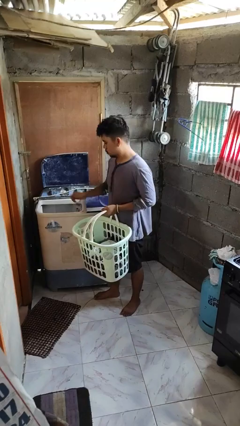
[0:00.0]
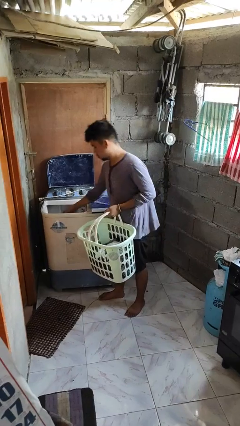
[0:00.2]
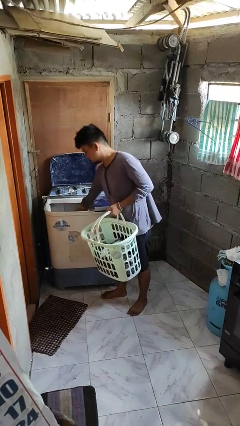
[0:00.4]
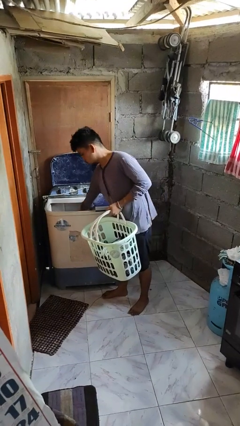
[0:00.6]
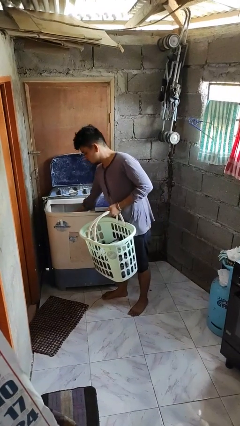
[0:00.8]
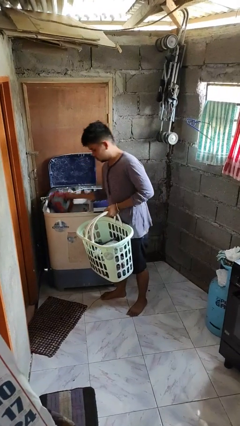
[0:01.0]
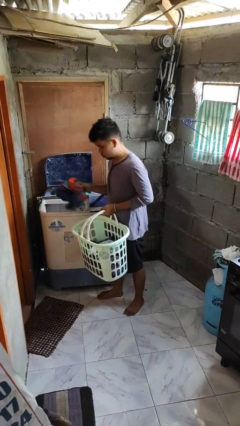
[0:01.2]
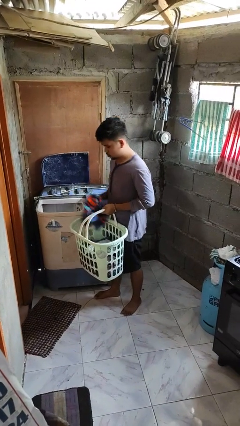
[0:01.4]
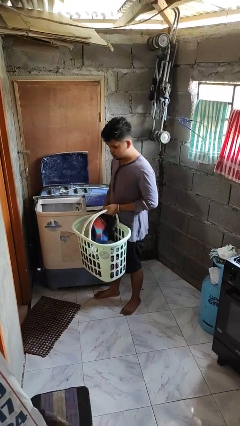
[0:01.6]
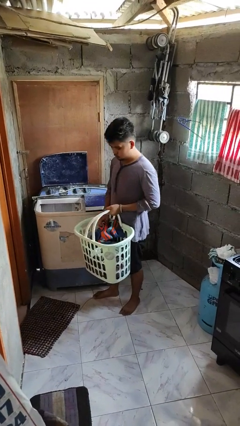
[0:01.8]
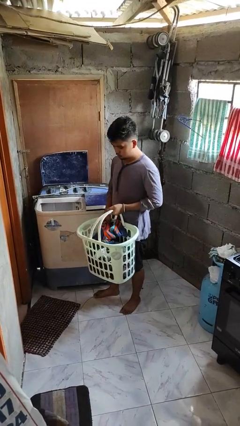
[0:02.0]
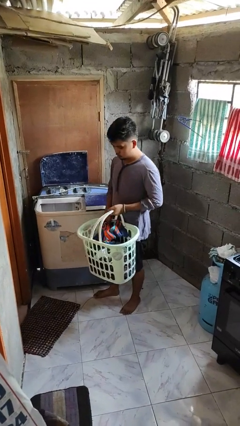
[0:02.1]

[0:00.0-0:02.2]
person unloads clotheswasher

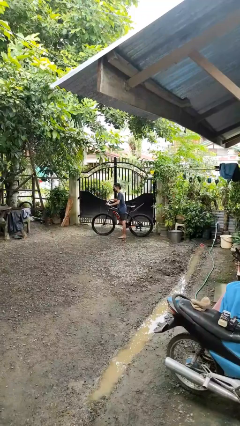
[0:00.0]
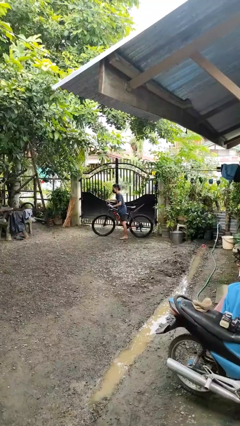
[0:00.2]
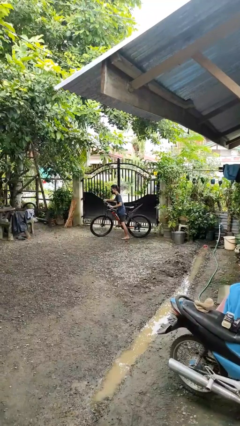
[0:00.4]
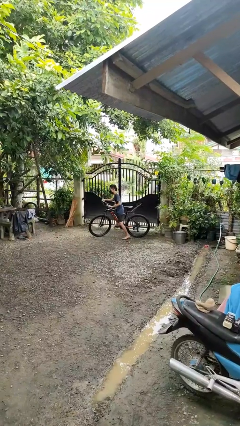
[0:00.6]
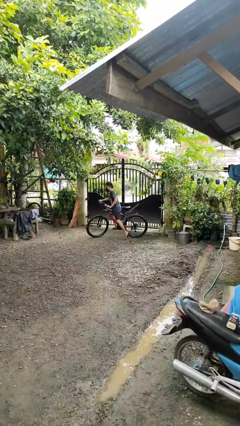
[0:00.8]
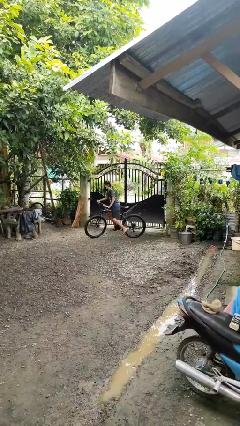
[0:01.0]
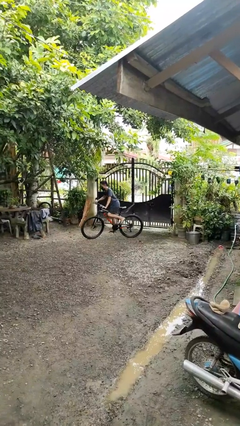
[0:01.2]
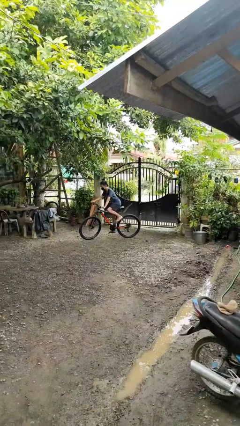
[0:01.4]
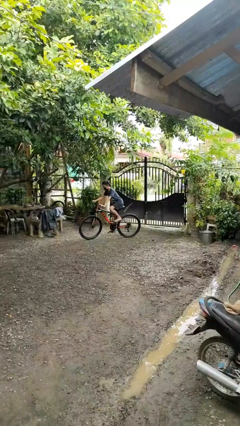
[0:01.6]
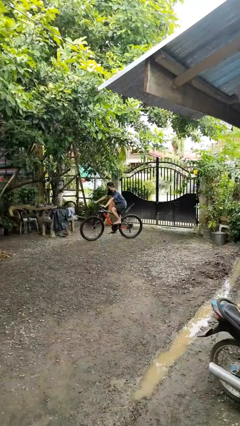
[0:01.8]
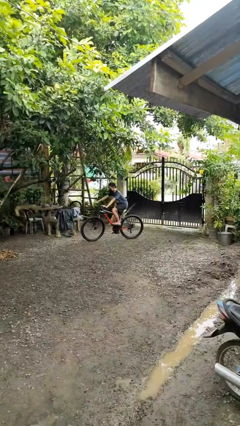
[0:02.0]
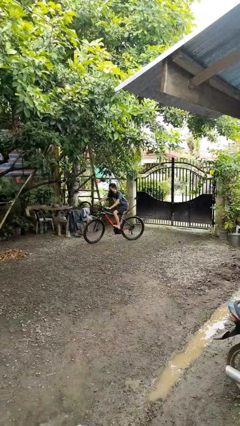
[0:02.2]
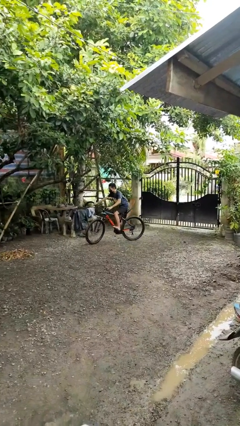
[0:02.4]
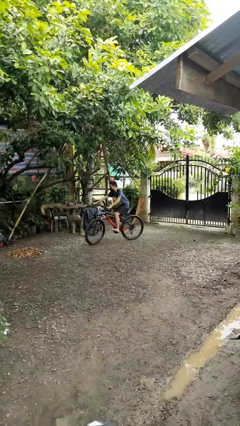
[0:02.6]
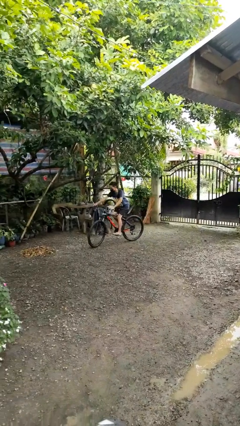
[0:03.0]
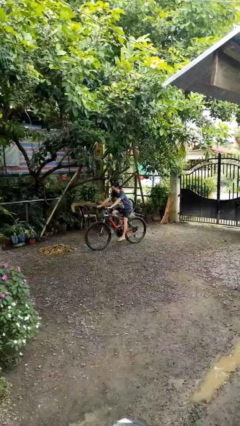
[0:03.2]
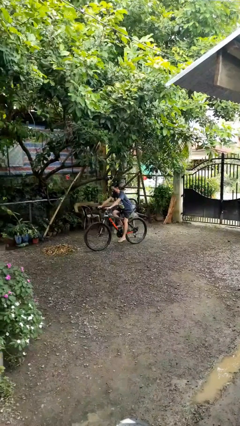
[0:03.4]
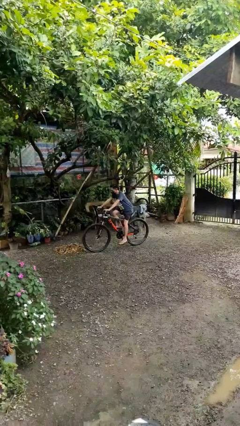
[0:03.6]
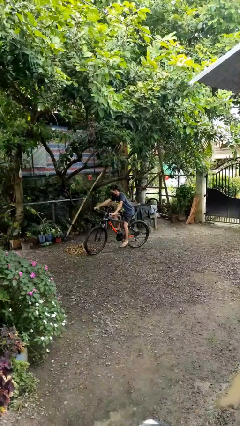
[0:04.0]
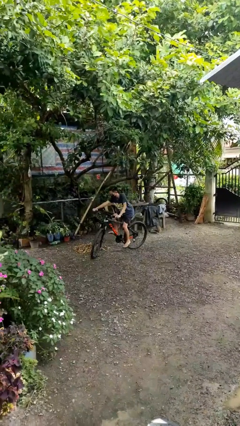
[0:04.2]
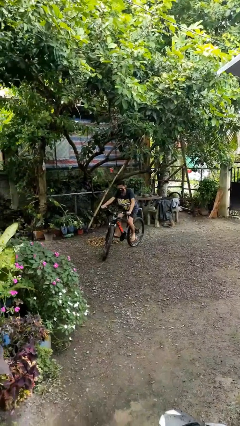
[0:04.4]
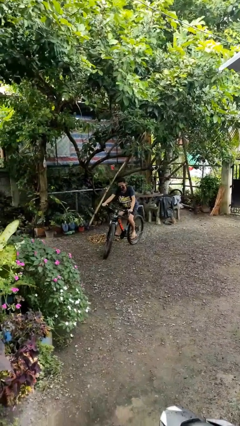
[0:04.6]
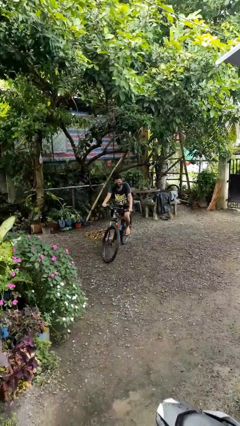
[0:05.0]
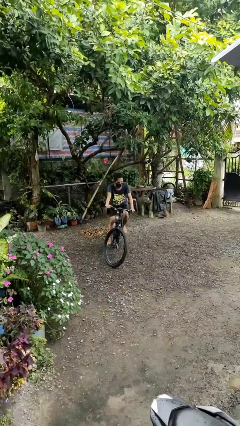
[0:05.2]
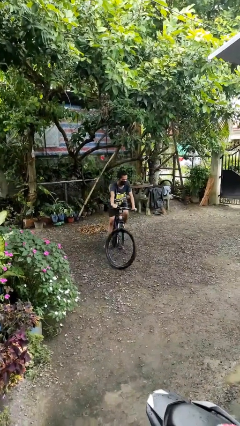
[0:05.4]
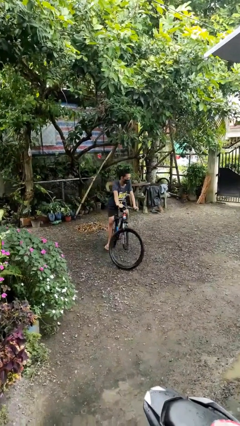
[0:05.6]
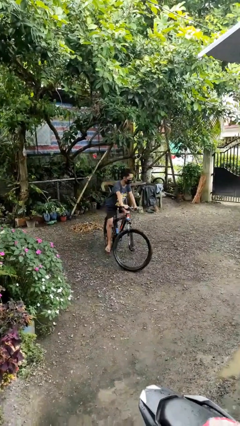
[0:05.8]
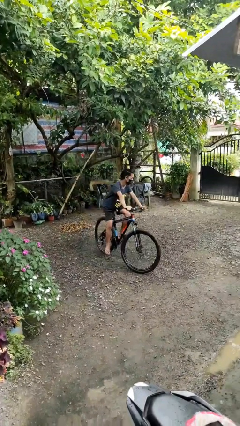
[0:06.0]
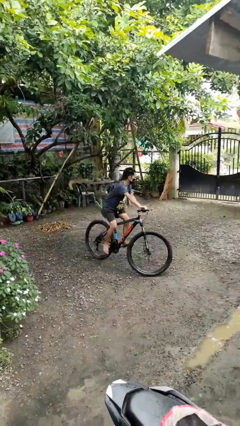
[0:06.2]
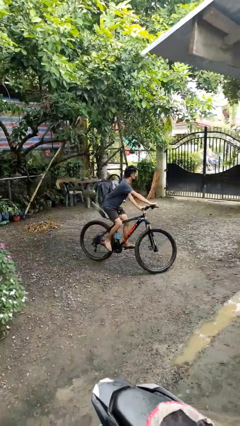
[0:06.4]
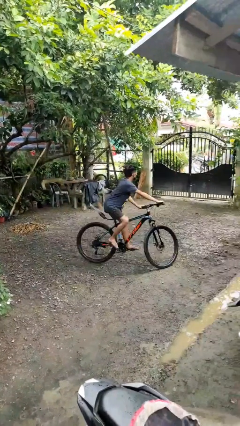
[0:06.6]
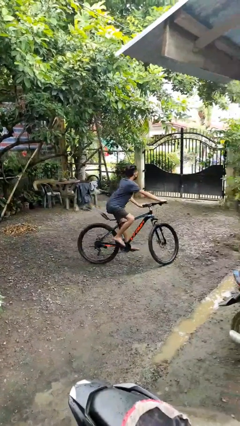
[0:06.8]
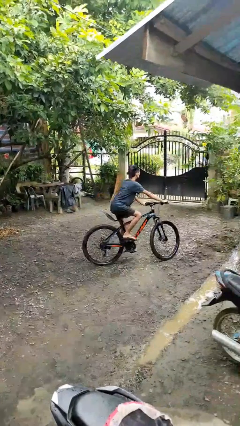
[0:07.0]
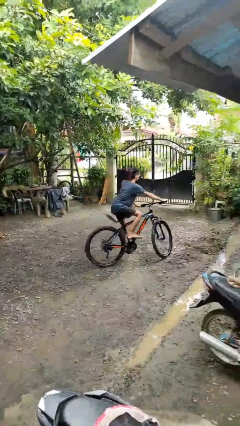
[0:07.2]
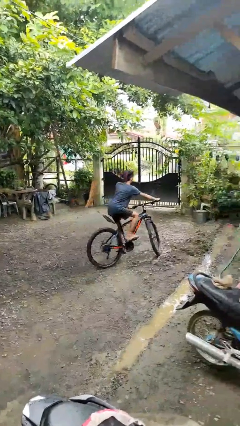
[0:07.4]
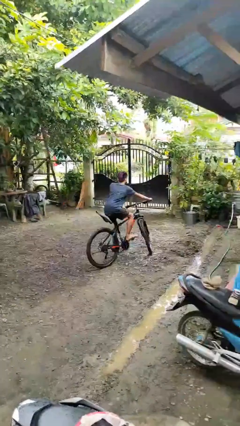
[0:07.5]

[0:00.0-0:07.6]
person rides bicycle

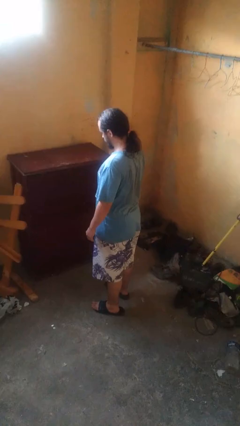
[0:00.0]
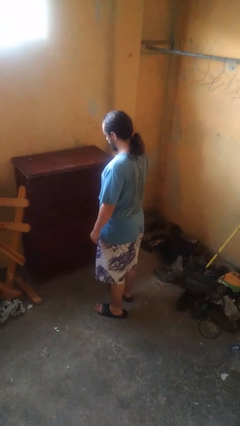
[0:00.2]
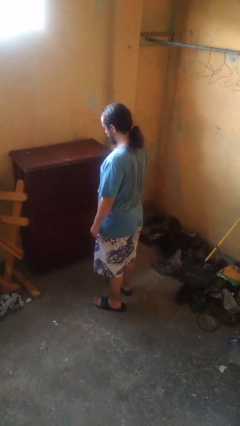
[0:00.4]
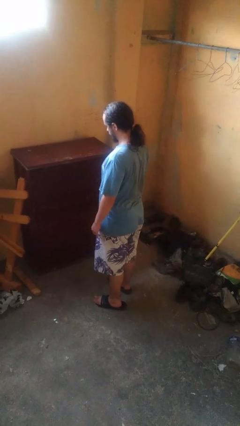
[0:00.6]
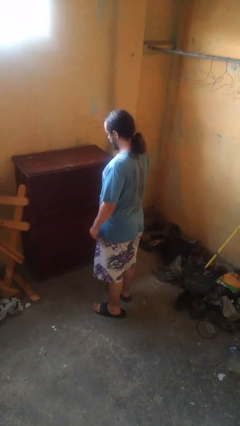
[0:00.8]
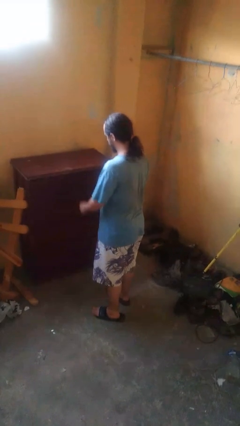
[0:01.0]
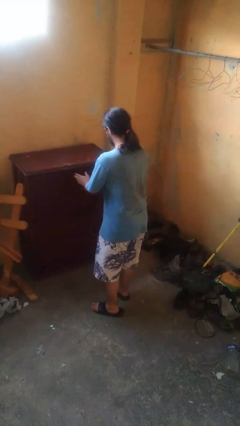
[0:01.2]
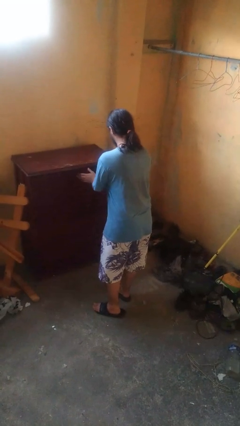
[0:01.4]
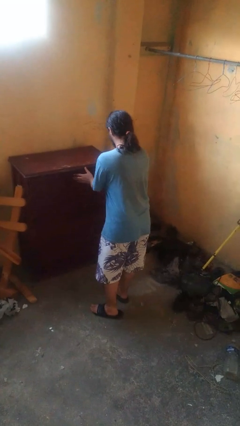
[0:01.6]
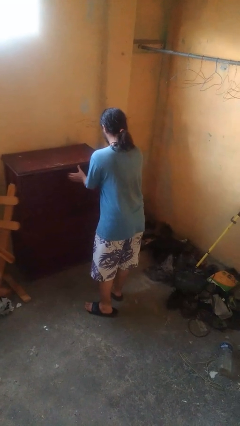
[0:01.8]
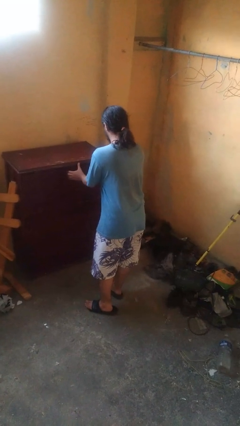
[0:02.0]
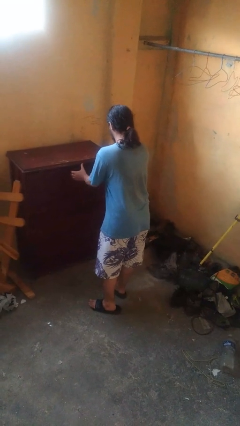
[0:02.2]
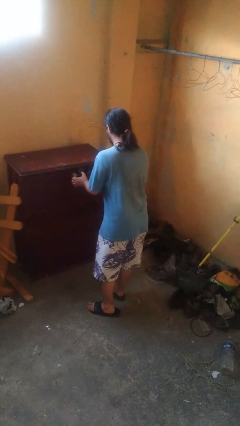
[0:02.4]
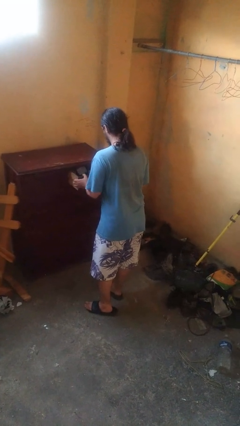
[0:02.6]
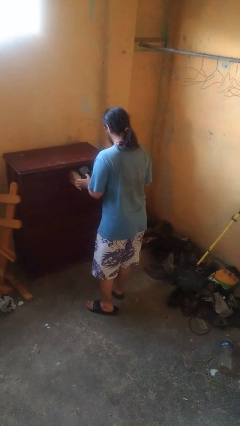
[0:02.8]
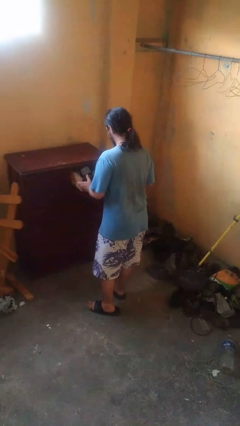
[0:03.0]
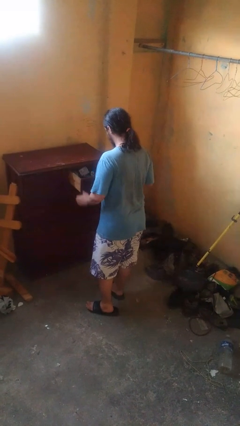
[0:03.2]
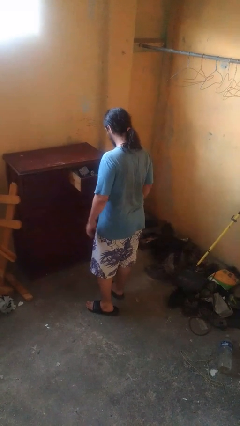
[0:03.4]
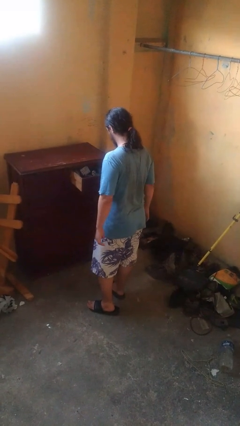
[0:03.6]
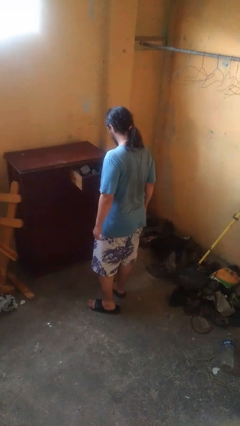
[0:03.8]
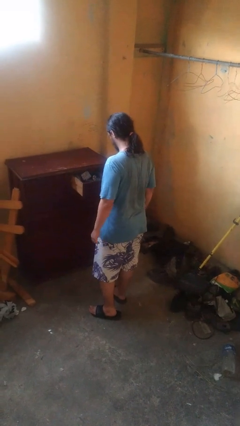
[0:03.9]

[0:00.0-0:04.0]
person opens dresser drawer

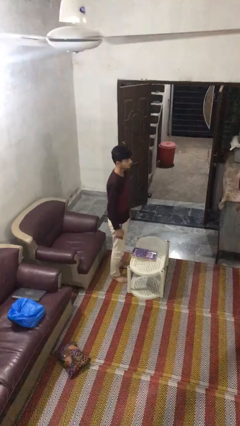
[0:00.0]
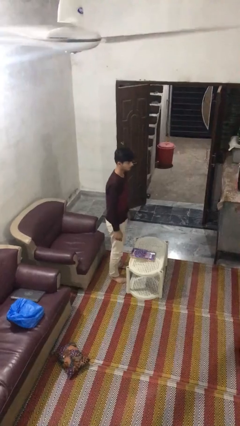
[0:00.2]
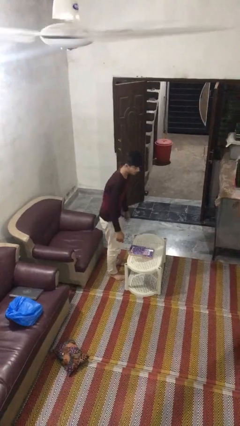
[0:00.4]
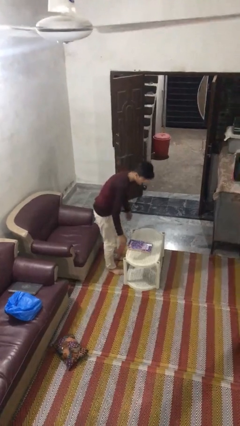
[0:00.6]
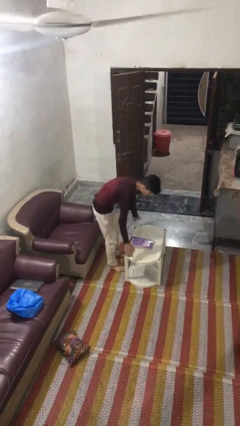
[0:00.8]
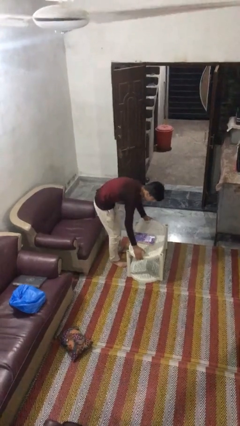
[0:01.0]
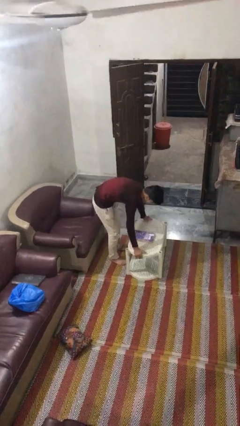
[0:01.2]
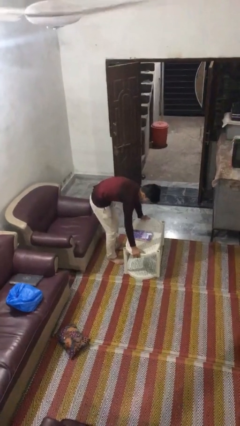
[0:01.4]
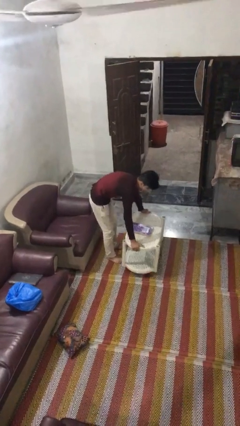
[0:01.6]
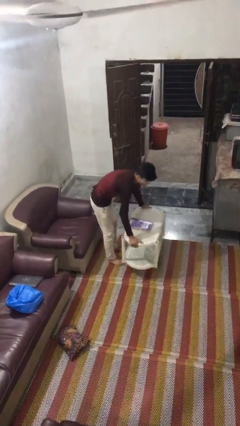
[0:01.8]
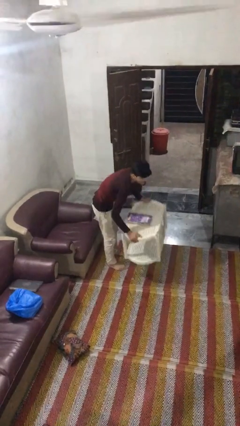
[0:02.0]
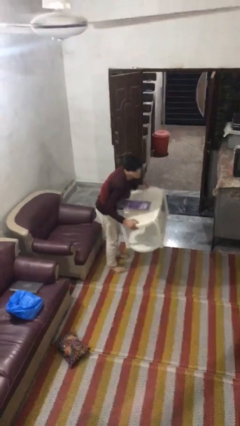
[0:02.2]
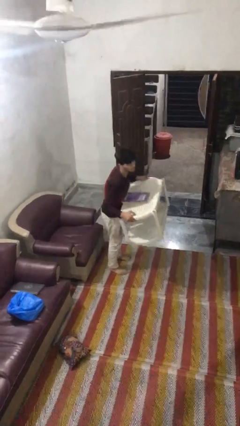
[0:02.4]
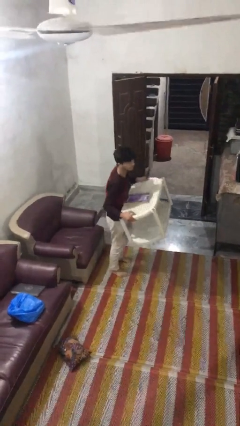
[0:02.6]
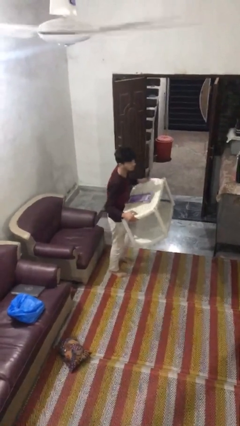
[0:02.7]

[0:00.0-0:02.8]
person picks up object from floor

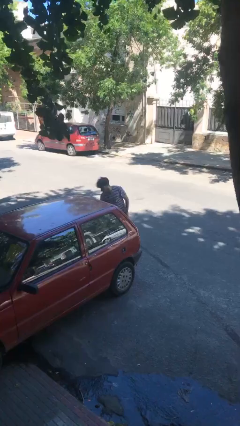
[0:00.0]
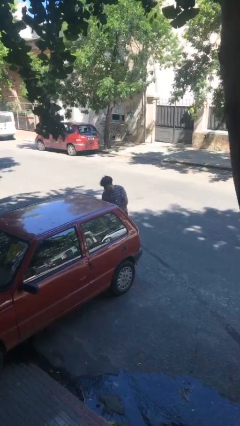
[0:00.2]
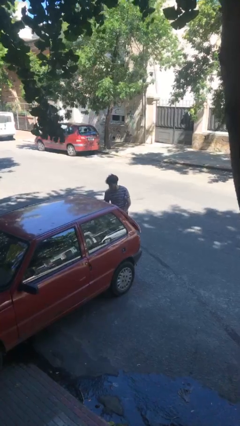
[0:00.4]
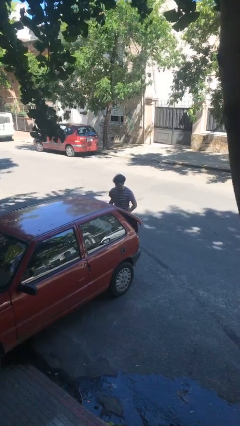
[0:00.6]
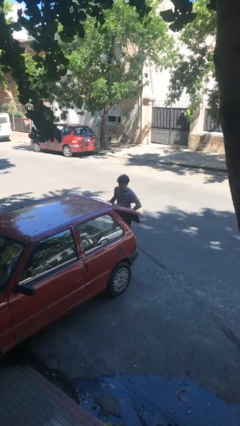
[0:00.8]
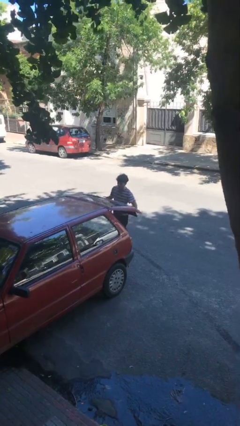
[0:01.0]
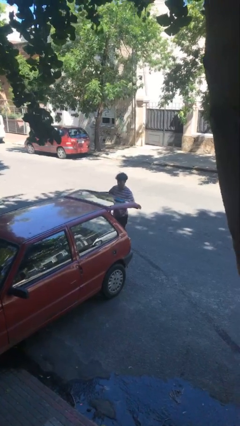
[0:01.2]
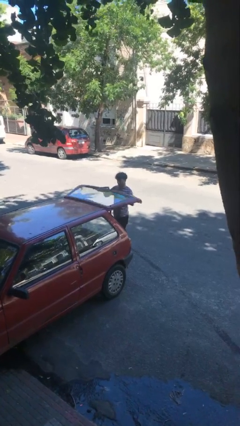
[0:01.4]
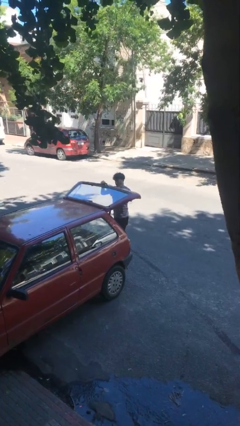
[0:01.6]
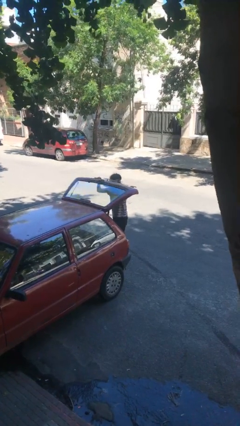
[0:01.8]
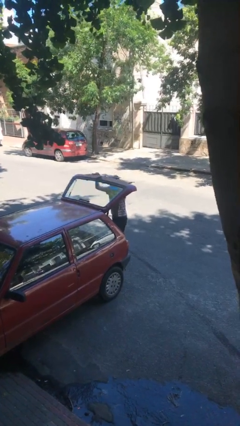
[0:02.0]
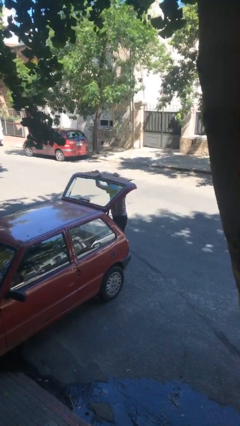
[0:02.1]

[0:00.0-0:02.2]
person opens car trunk
